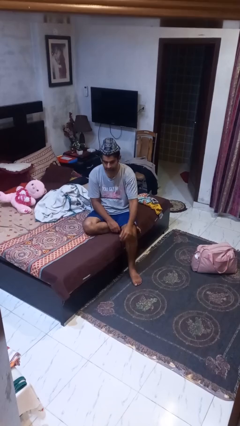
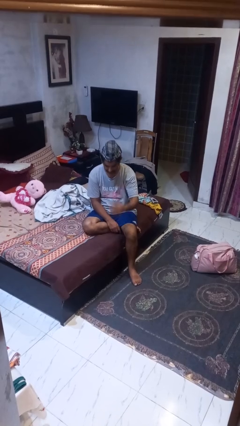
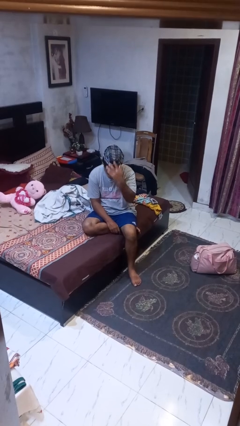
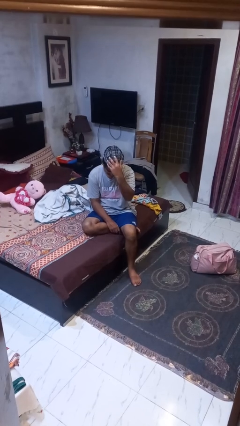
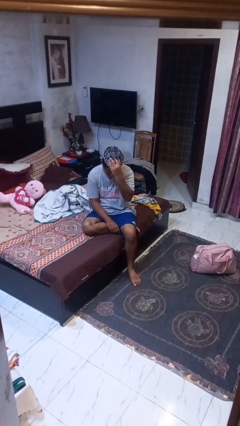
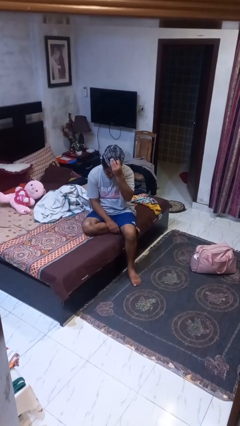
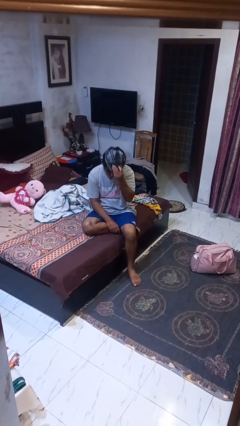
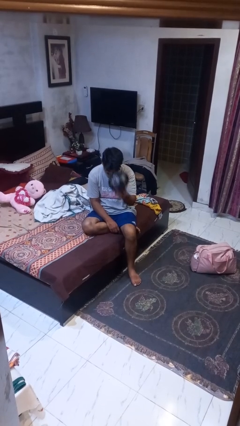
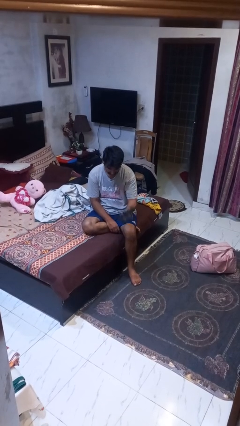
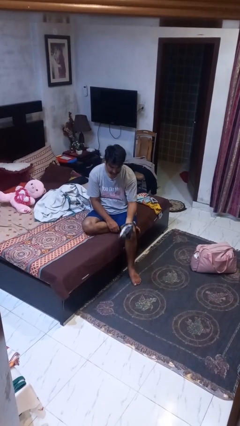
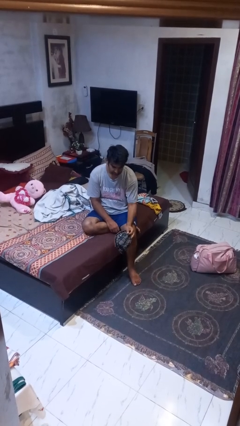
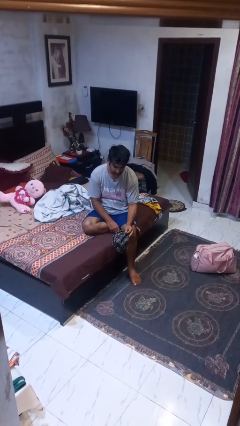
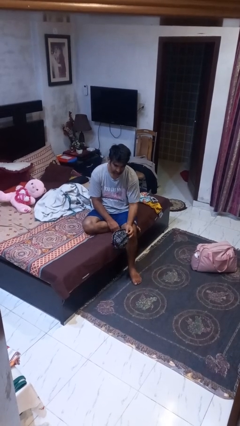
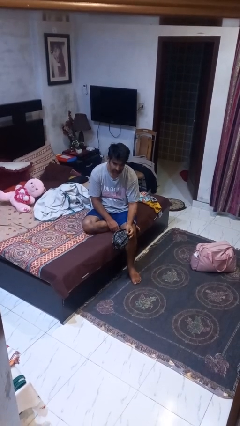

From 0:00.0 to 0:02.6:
person takes off hat

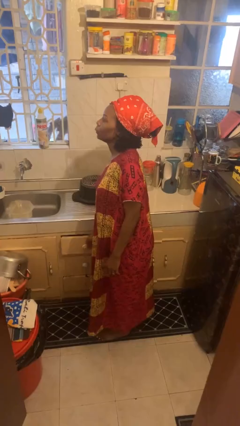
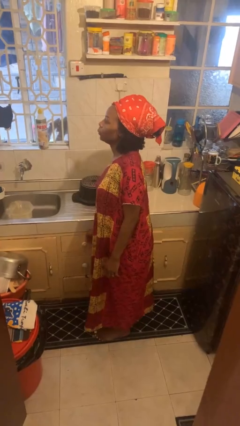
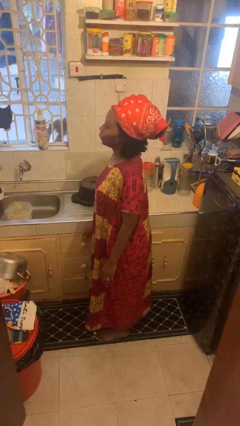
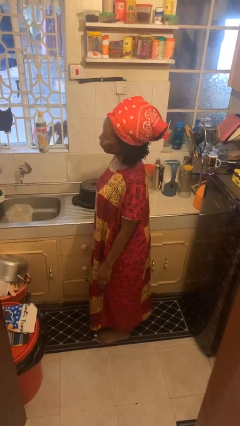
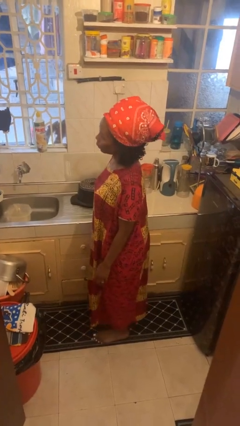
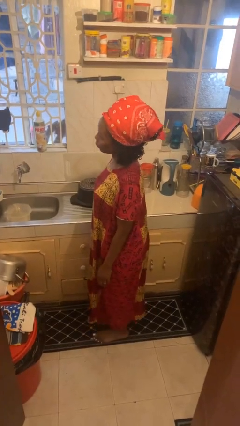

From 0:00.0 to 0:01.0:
person closes kitchen drawer

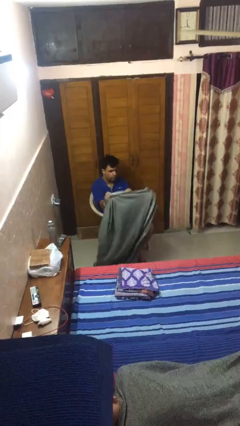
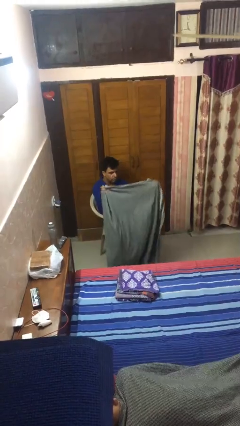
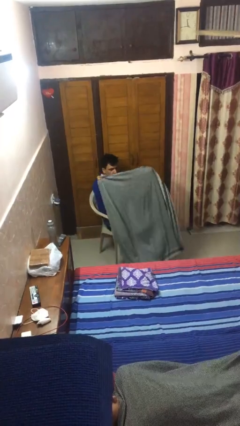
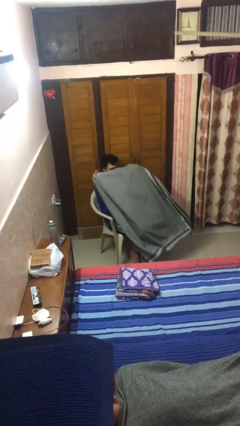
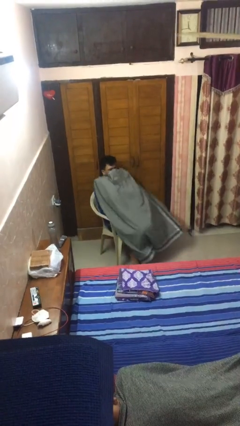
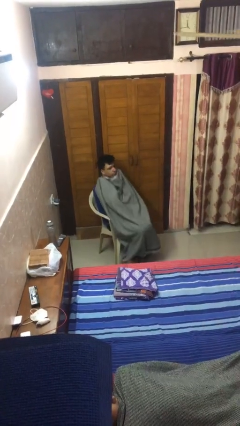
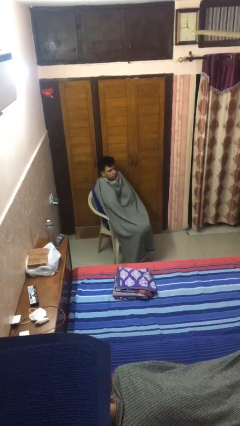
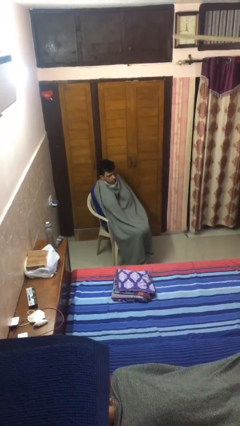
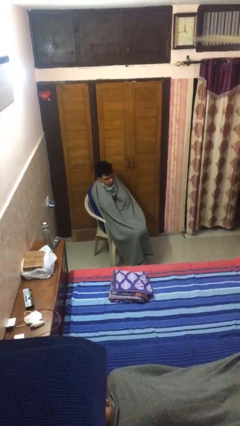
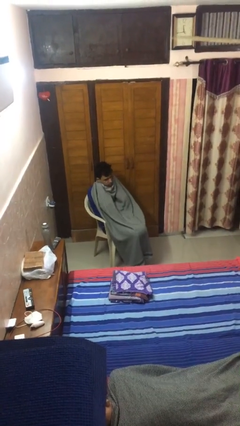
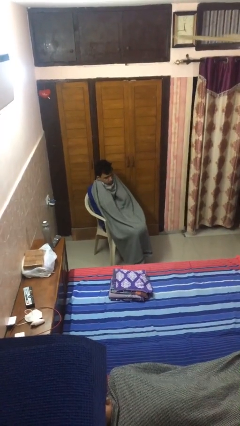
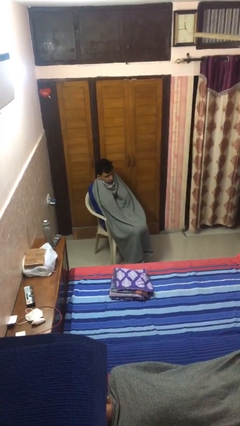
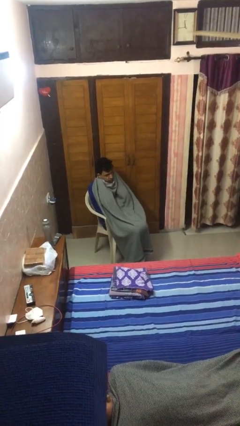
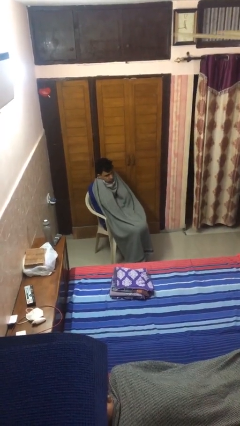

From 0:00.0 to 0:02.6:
person covers with blanket

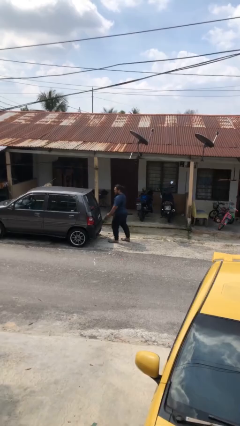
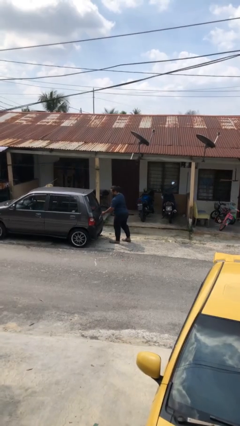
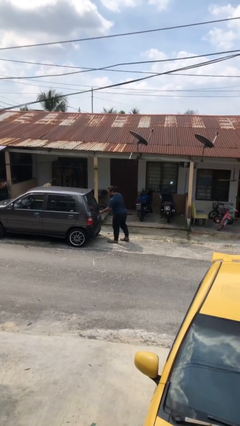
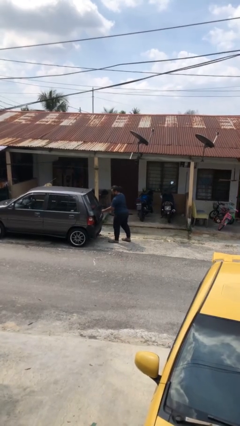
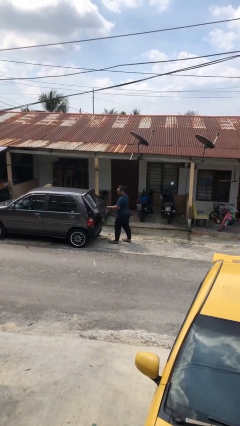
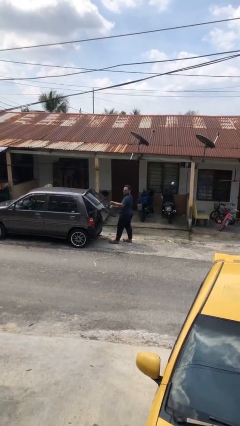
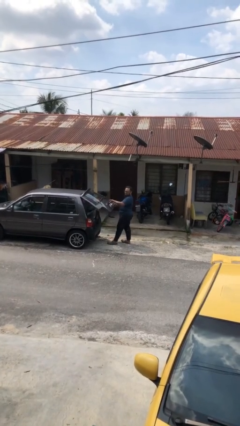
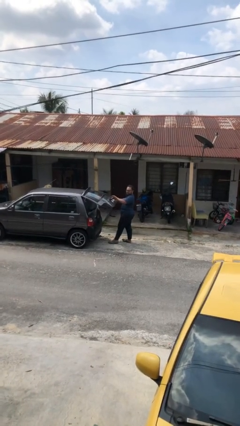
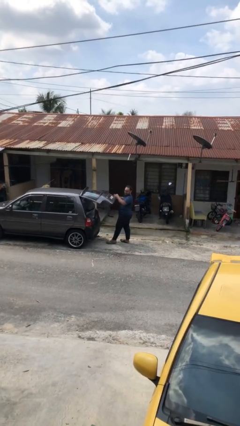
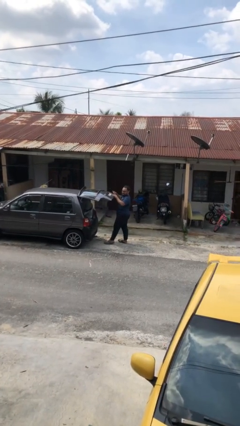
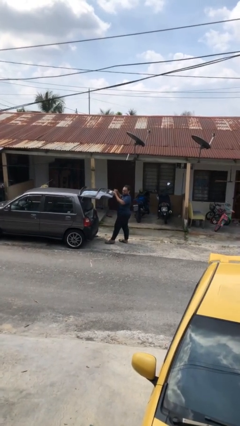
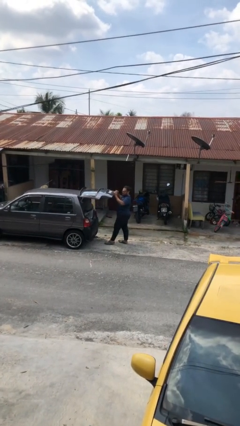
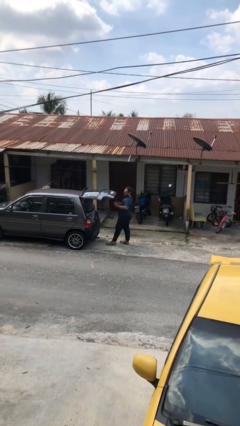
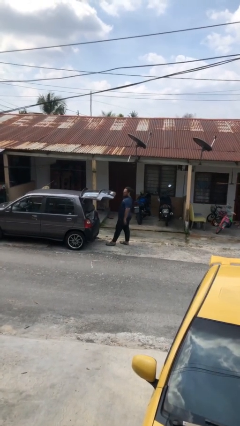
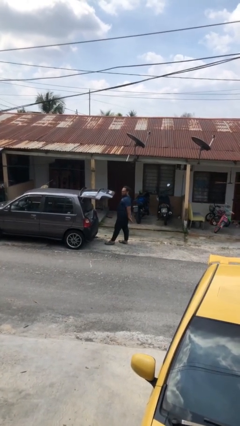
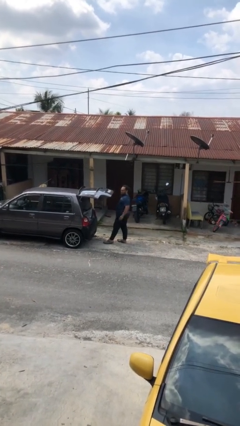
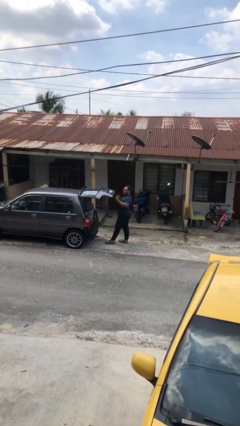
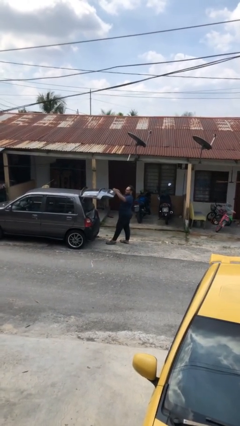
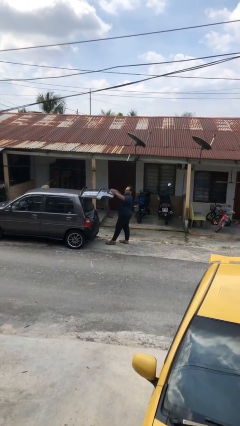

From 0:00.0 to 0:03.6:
person opens car trunk

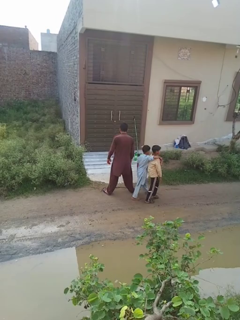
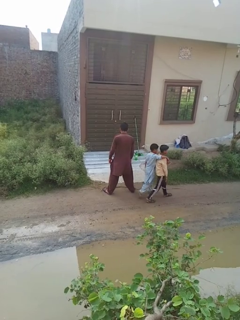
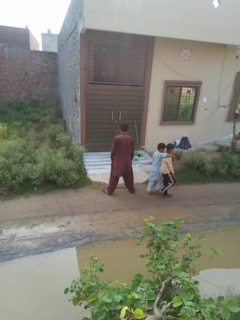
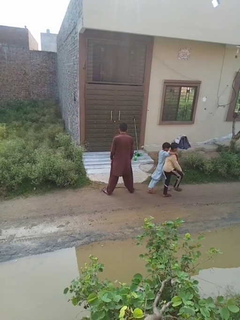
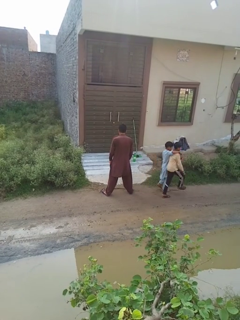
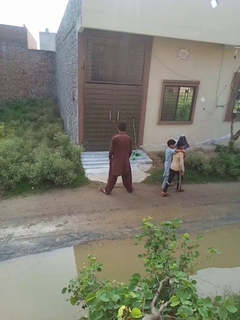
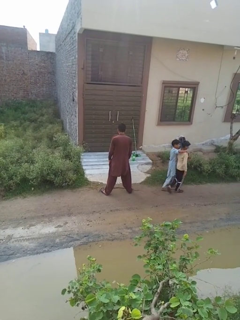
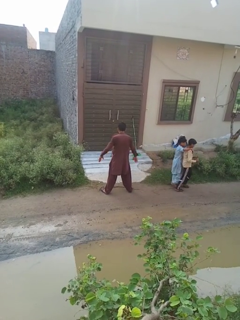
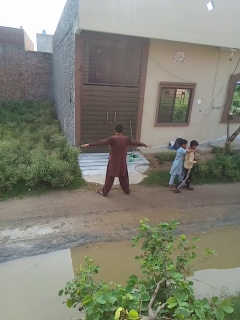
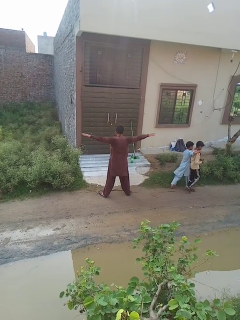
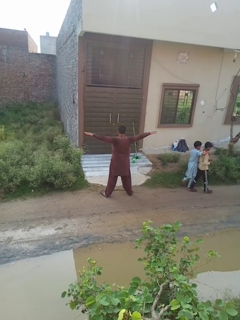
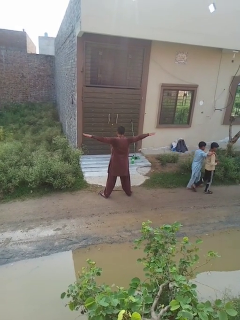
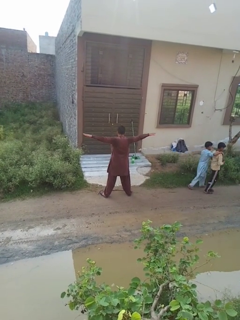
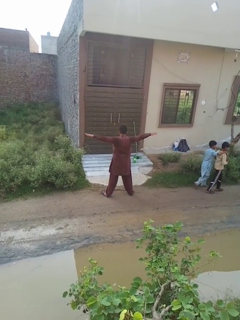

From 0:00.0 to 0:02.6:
person stretches arms to side

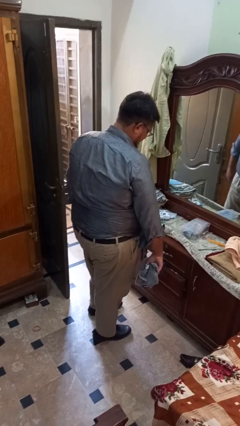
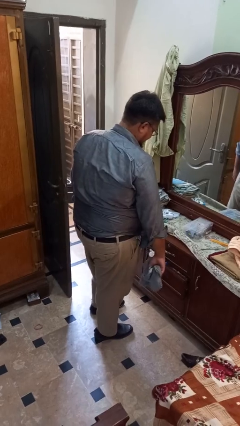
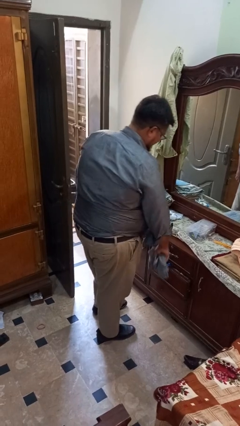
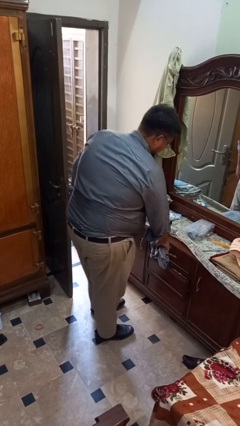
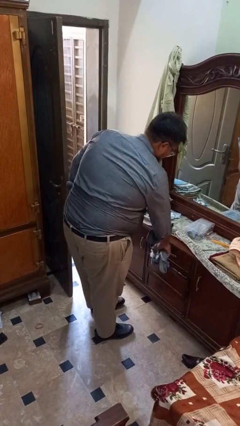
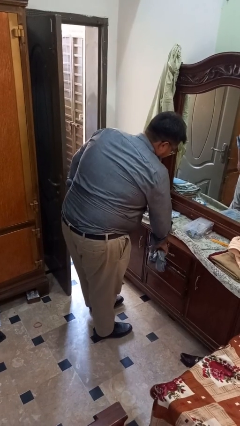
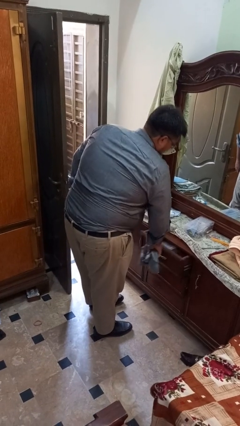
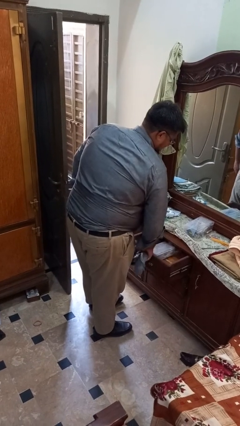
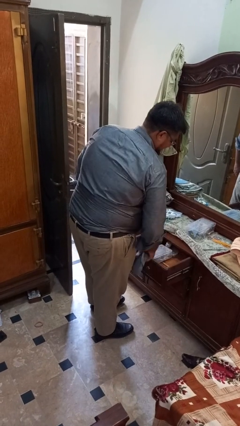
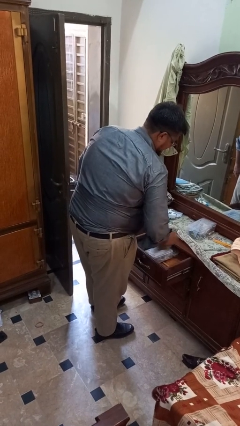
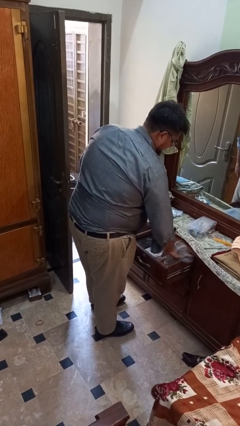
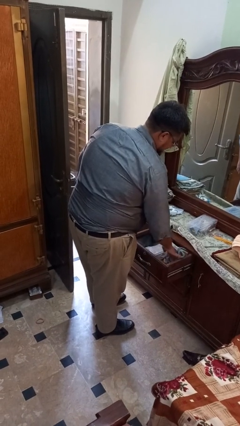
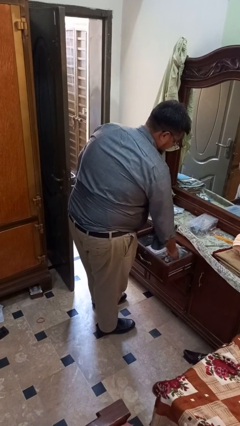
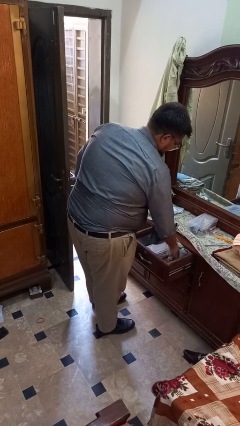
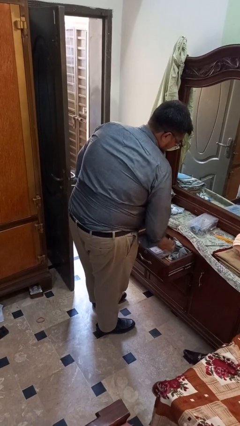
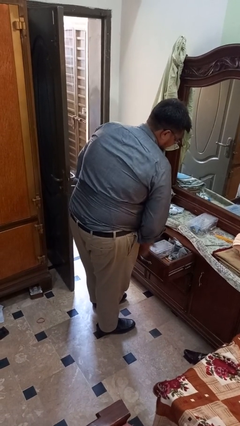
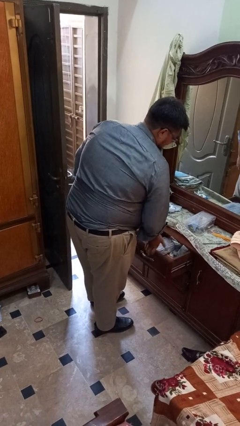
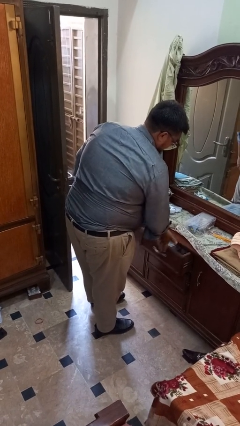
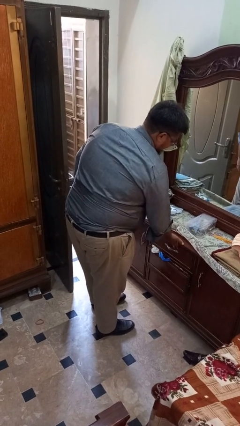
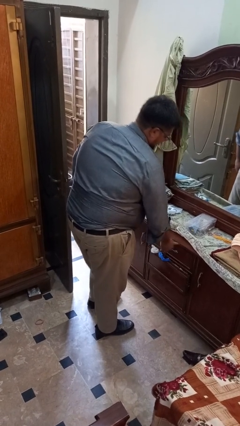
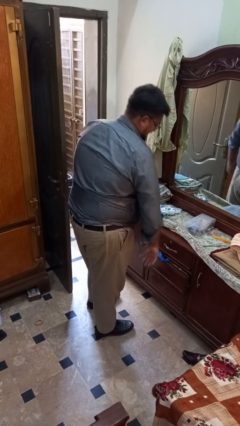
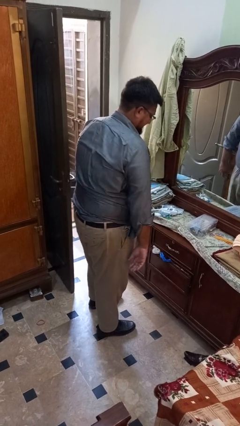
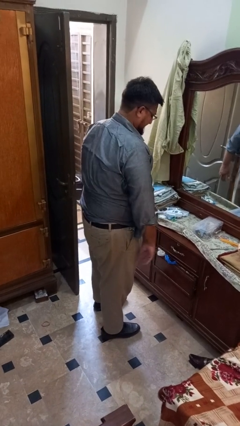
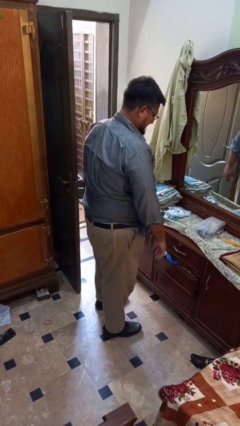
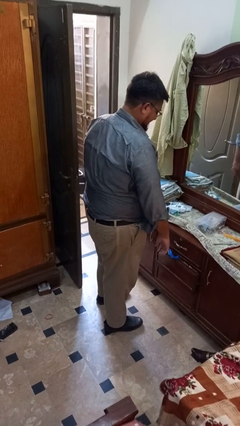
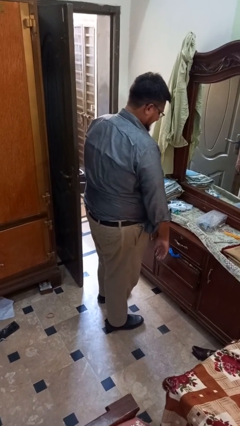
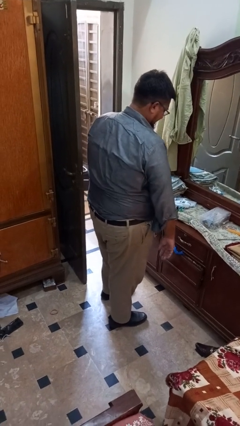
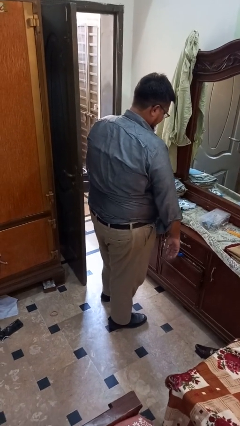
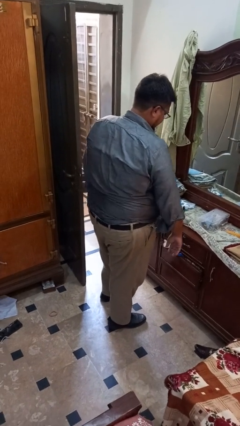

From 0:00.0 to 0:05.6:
person puts clothes into dresser
